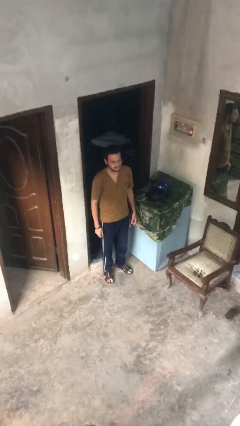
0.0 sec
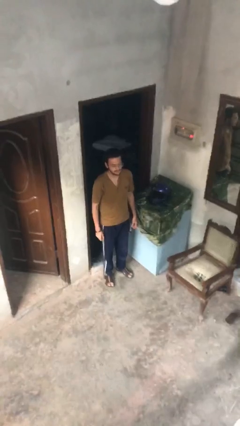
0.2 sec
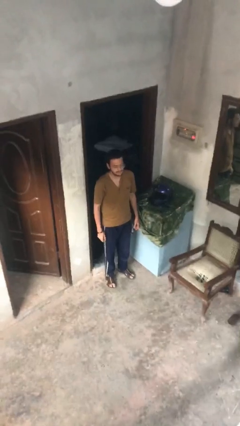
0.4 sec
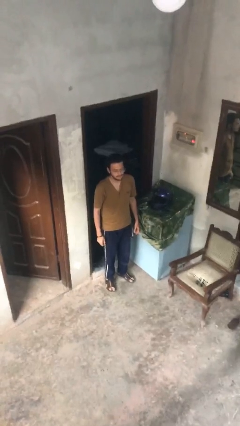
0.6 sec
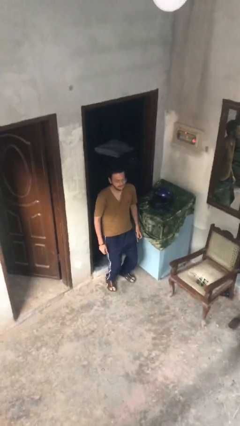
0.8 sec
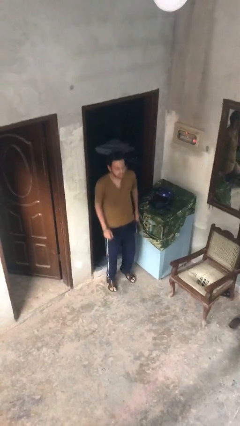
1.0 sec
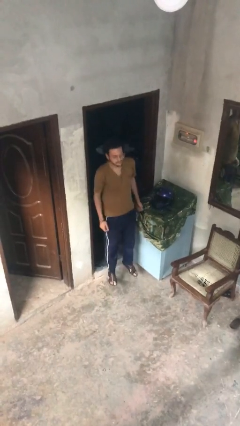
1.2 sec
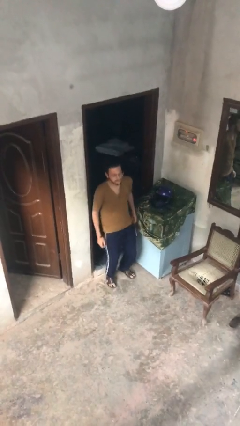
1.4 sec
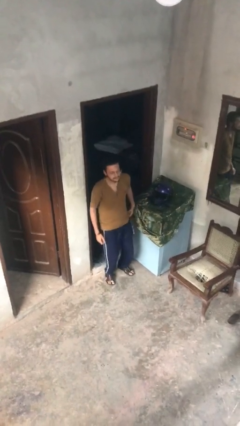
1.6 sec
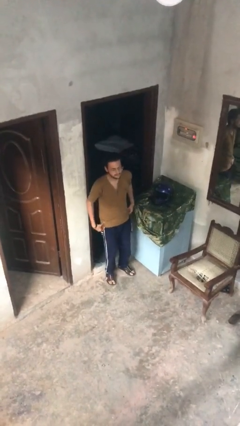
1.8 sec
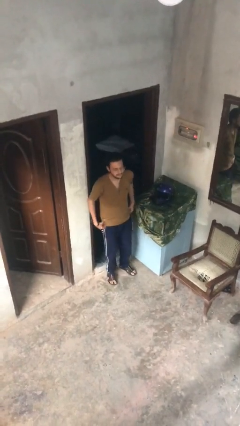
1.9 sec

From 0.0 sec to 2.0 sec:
person jumps

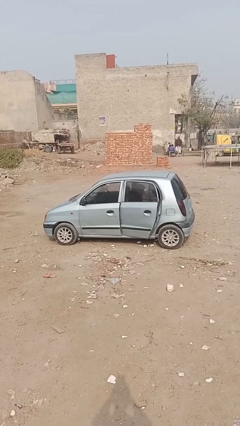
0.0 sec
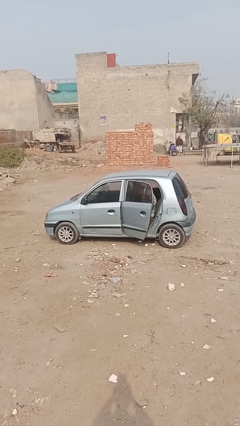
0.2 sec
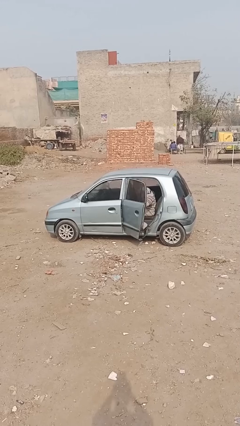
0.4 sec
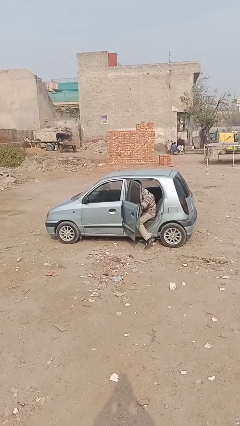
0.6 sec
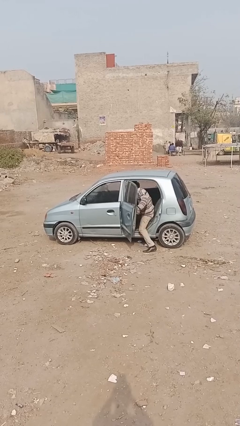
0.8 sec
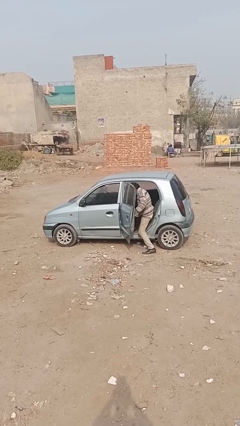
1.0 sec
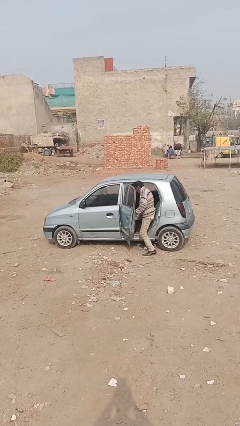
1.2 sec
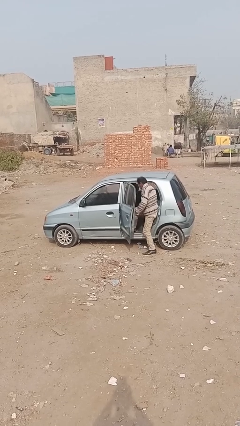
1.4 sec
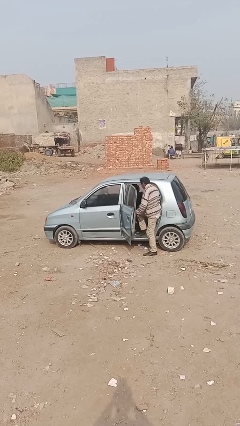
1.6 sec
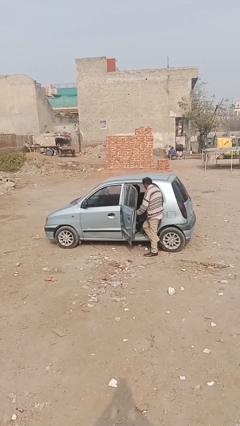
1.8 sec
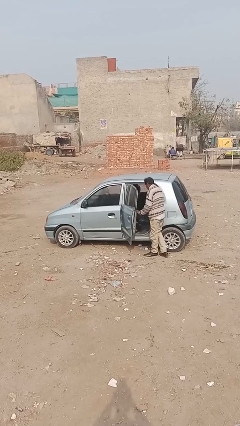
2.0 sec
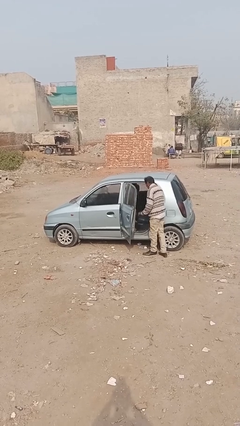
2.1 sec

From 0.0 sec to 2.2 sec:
car drops off person

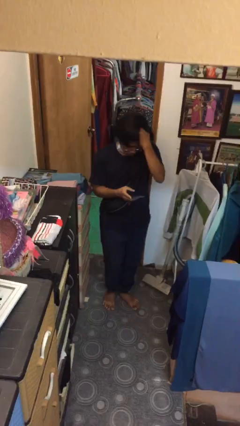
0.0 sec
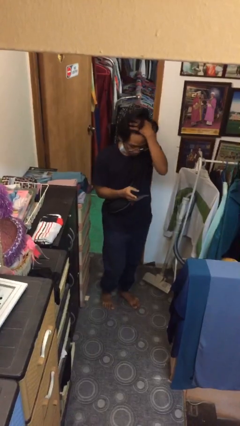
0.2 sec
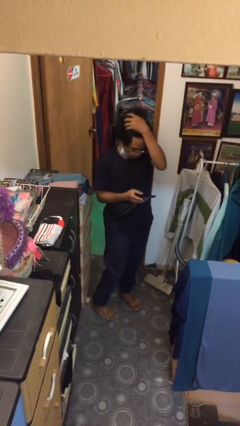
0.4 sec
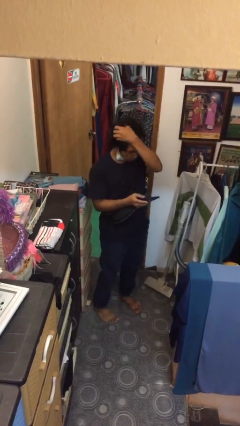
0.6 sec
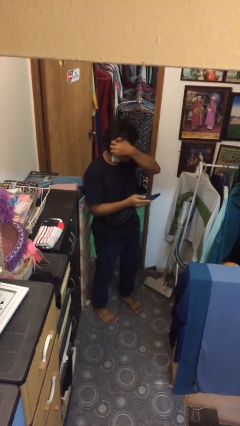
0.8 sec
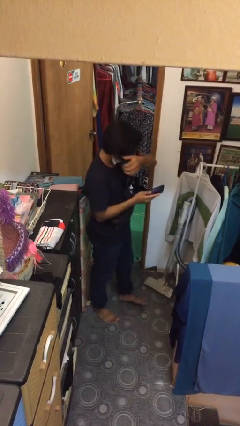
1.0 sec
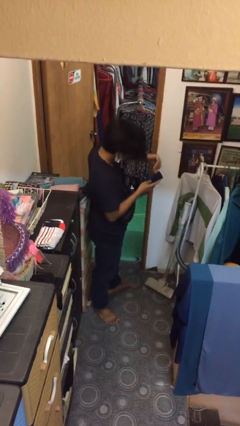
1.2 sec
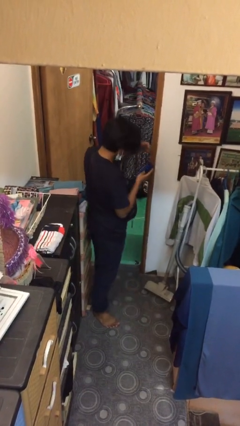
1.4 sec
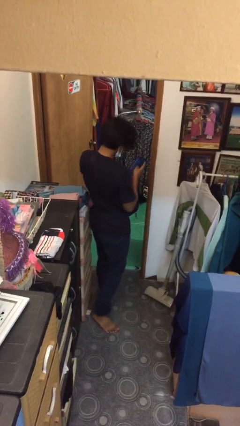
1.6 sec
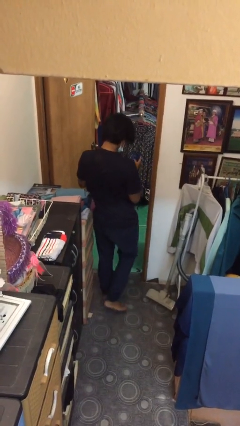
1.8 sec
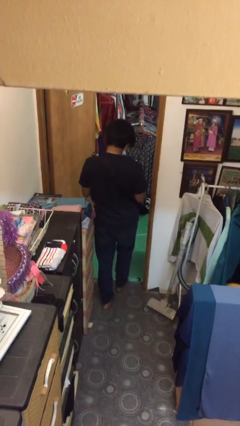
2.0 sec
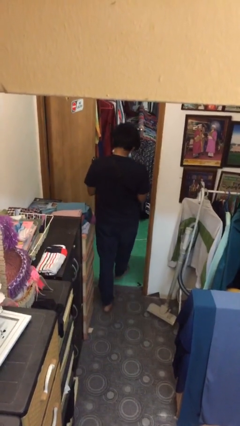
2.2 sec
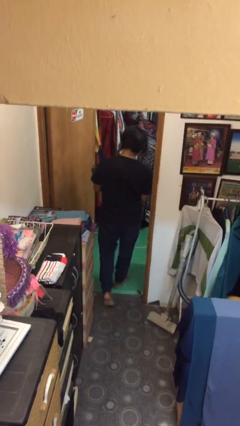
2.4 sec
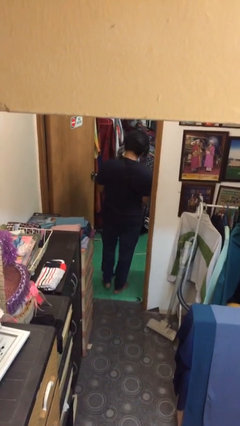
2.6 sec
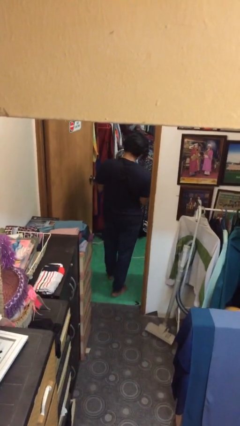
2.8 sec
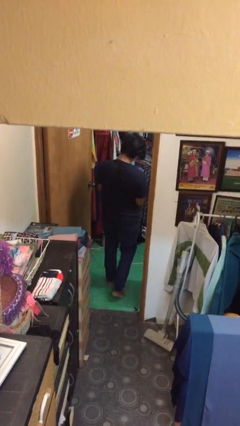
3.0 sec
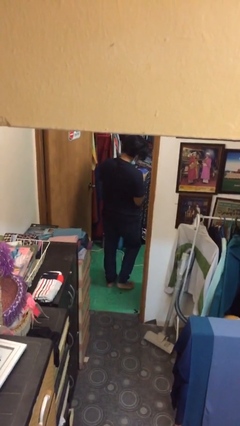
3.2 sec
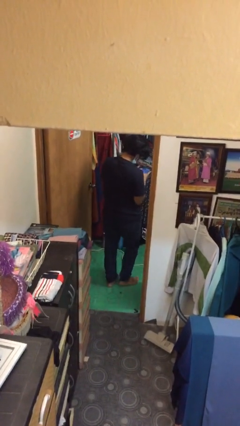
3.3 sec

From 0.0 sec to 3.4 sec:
person exits scene through structure

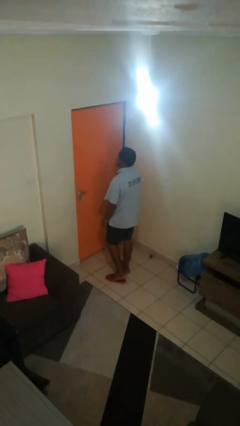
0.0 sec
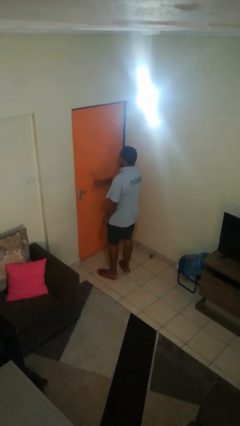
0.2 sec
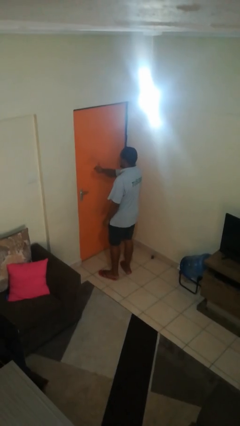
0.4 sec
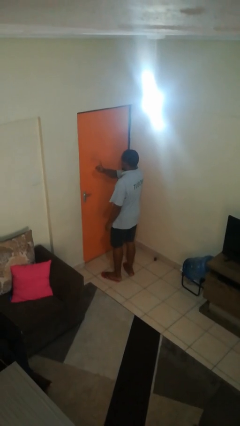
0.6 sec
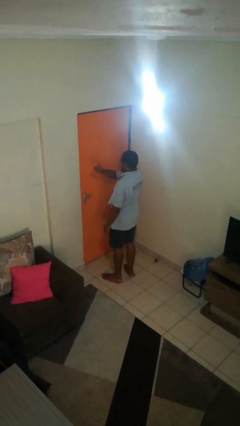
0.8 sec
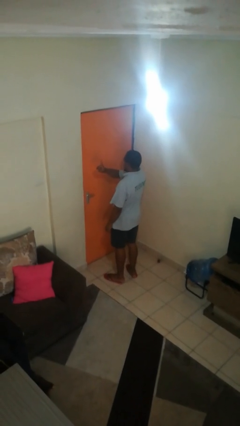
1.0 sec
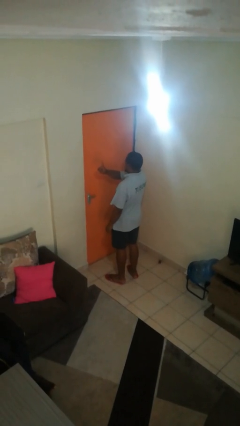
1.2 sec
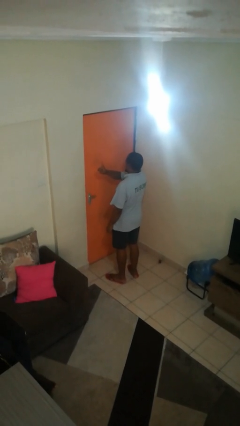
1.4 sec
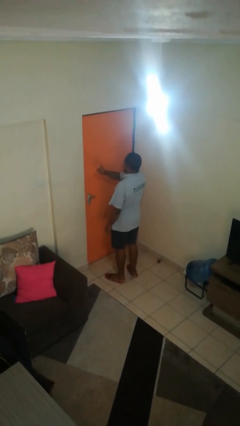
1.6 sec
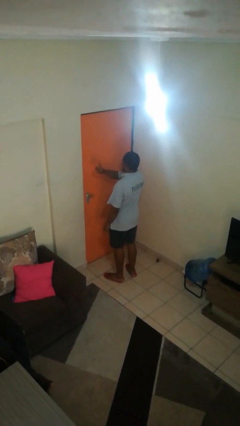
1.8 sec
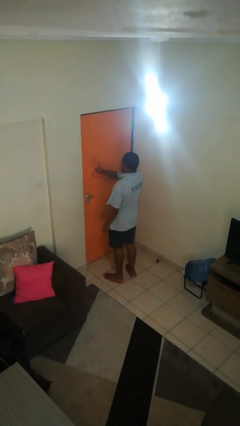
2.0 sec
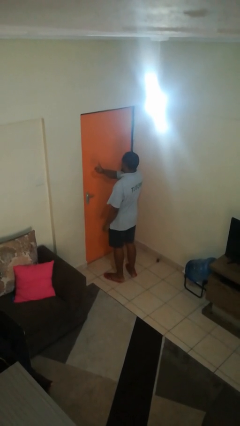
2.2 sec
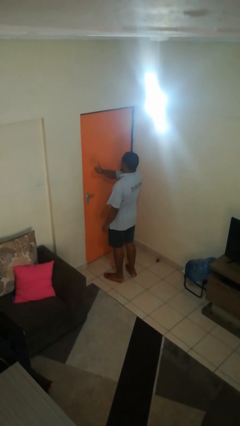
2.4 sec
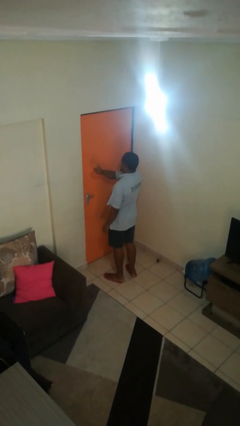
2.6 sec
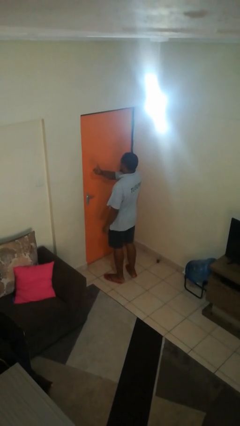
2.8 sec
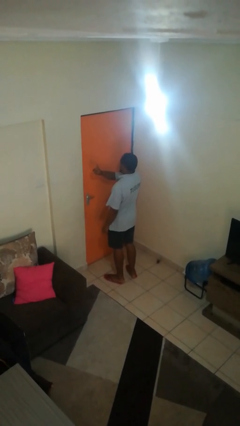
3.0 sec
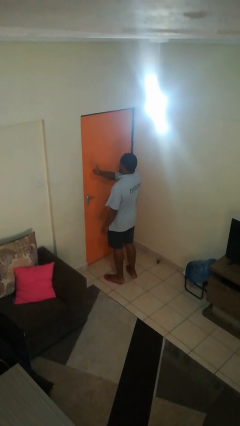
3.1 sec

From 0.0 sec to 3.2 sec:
person gestures number one

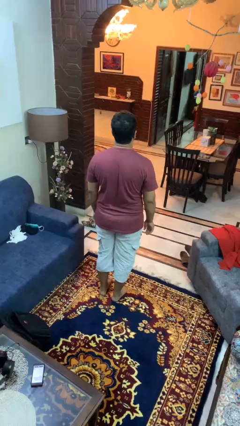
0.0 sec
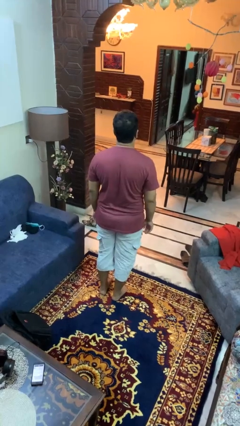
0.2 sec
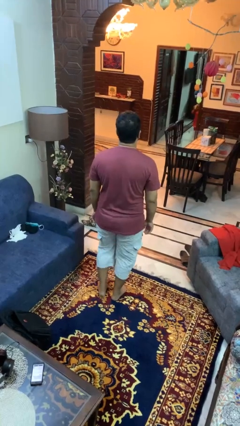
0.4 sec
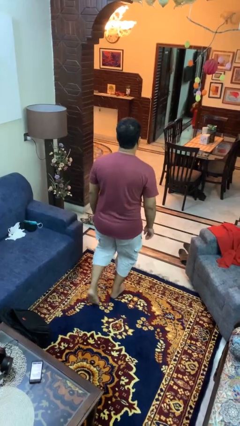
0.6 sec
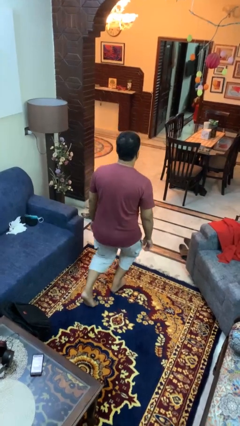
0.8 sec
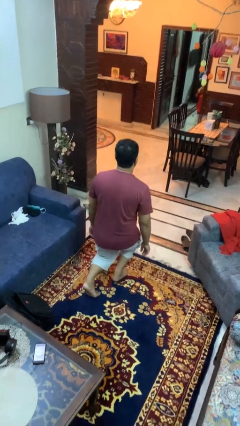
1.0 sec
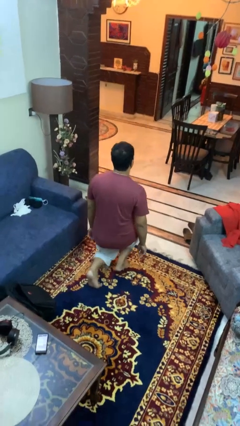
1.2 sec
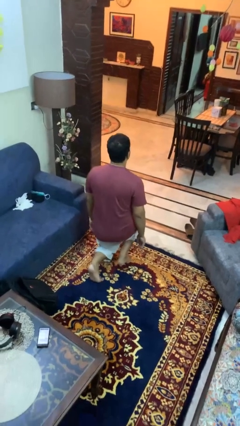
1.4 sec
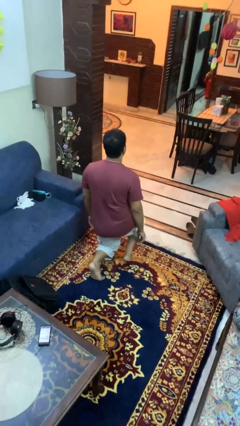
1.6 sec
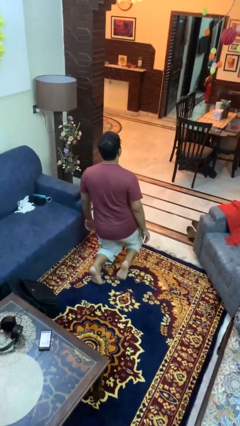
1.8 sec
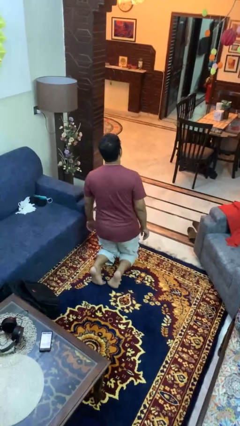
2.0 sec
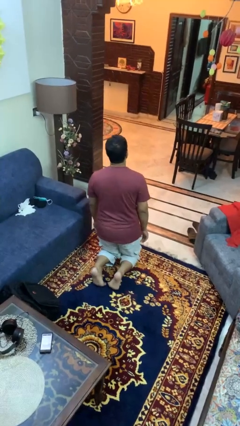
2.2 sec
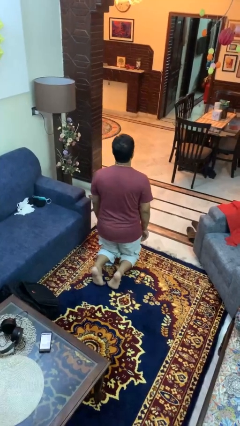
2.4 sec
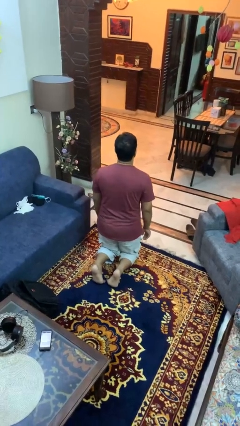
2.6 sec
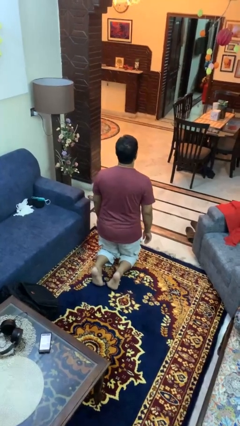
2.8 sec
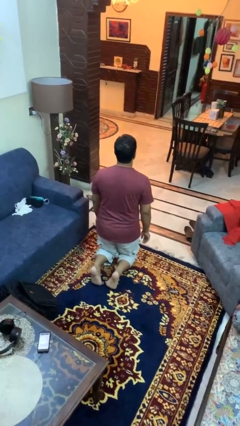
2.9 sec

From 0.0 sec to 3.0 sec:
person kneels

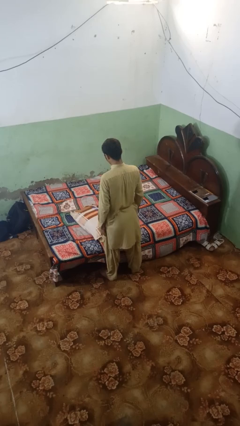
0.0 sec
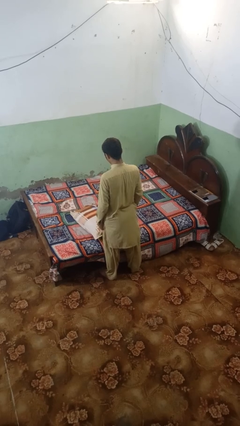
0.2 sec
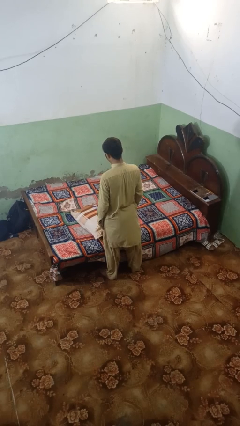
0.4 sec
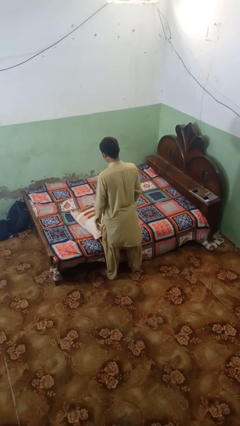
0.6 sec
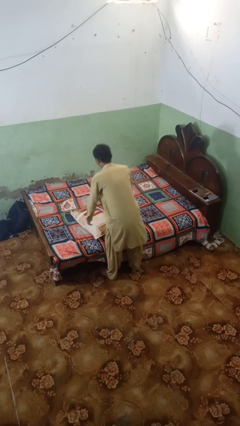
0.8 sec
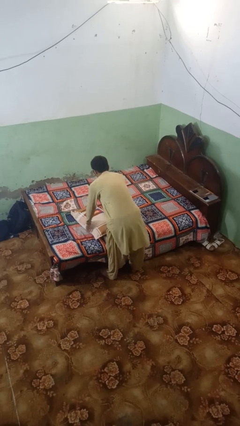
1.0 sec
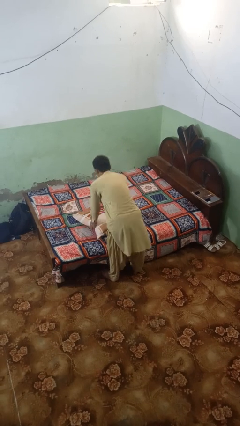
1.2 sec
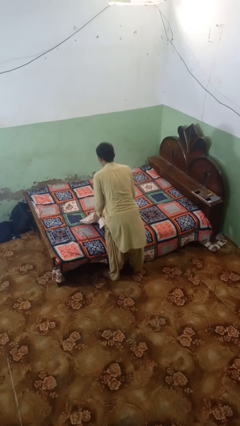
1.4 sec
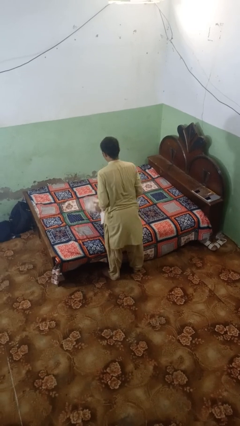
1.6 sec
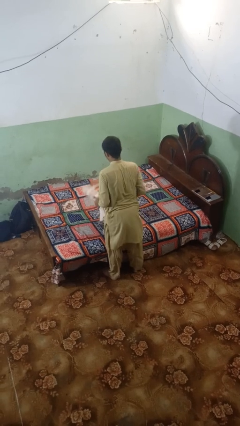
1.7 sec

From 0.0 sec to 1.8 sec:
person picks up object from bed

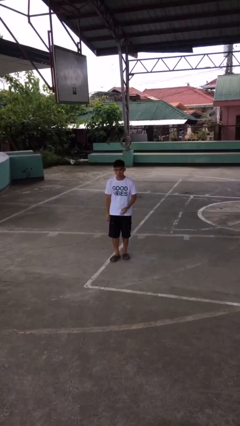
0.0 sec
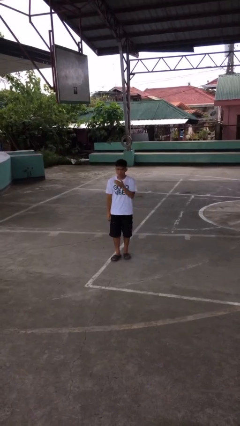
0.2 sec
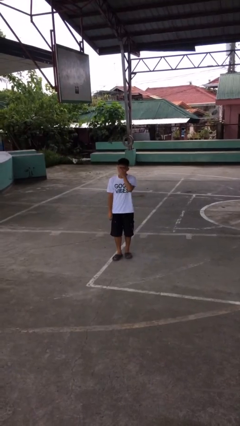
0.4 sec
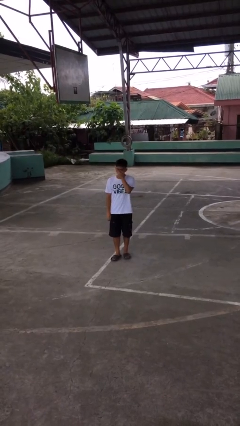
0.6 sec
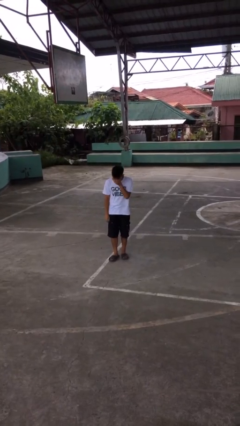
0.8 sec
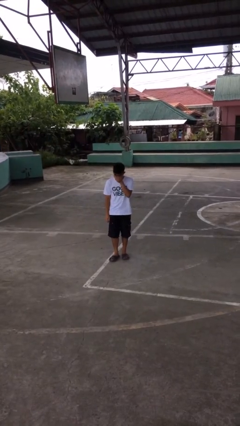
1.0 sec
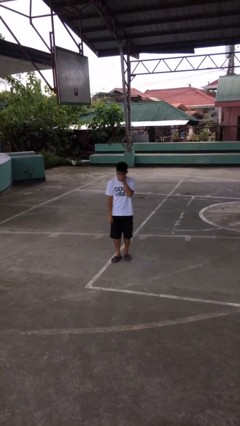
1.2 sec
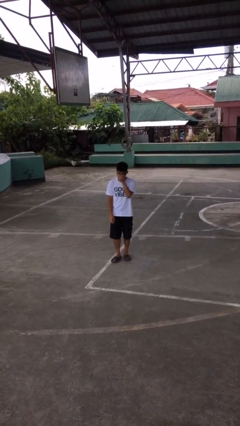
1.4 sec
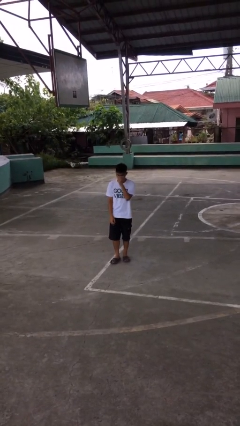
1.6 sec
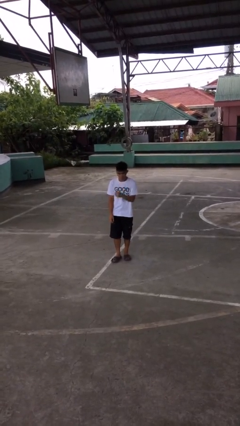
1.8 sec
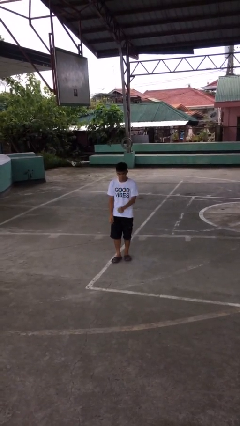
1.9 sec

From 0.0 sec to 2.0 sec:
person sneezes into hand
